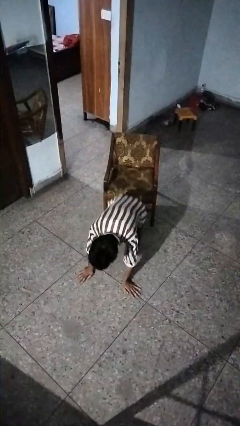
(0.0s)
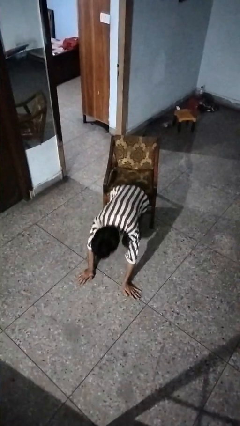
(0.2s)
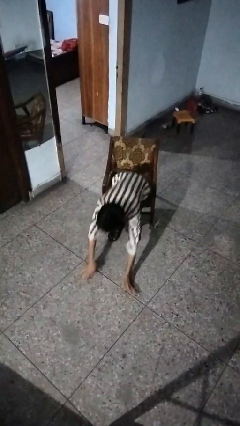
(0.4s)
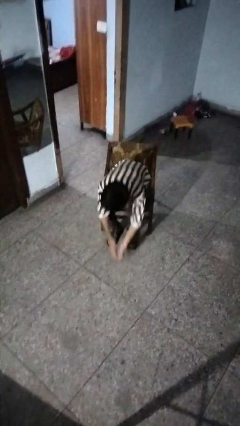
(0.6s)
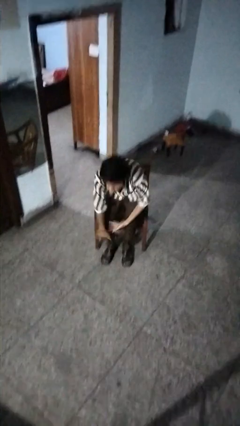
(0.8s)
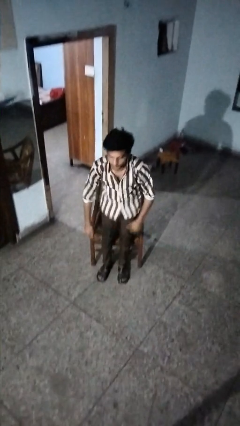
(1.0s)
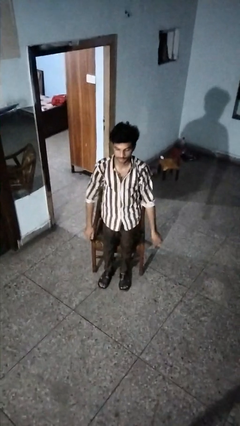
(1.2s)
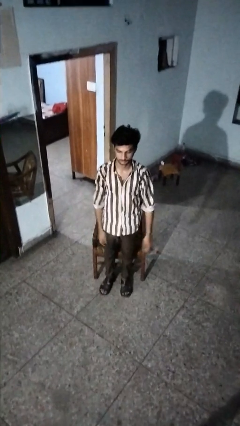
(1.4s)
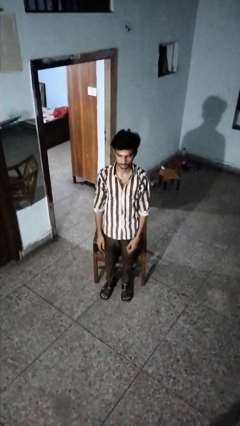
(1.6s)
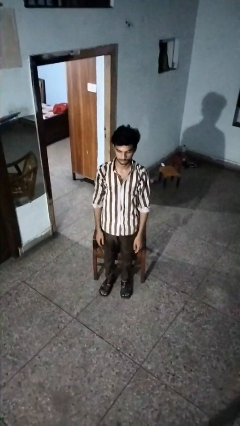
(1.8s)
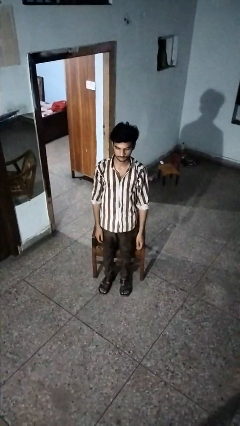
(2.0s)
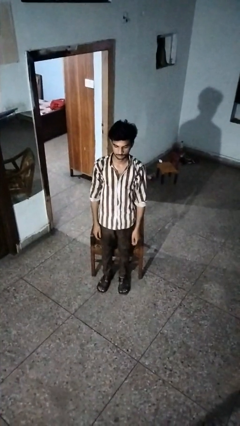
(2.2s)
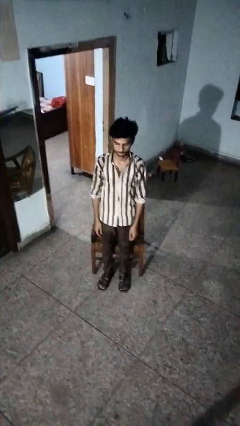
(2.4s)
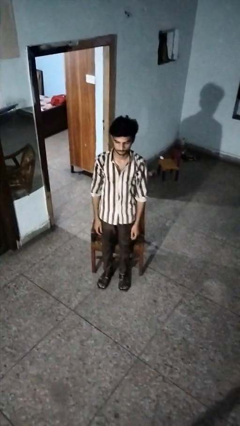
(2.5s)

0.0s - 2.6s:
person stands up from floor

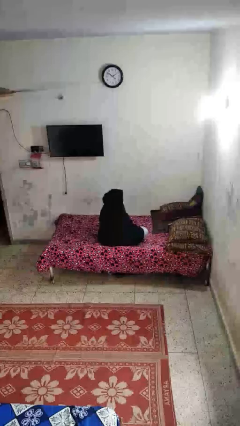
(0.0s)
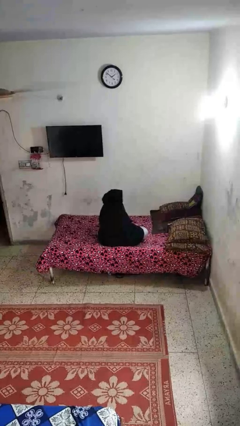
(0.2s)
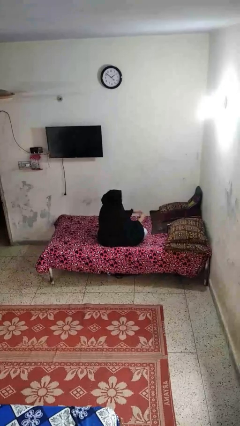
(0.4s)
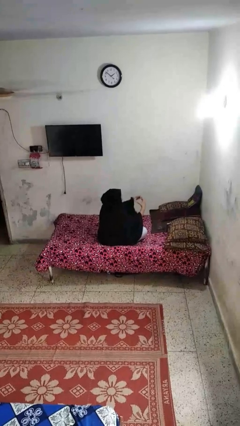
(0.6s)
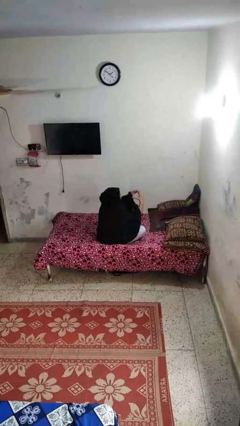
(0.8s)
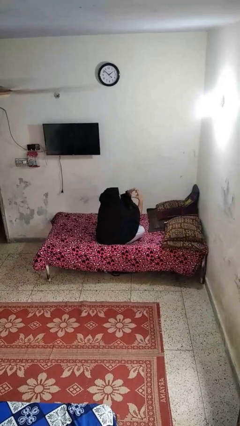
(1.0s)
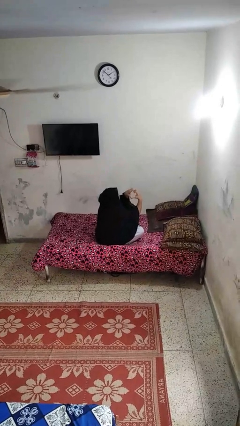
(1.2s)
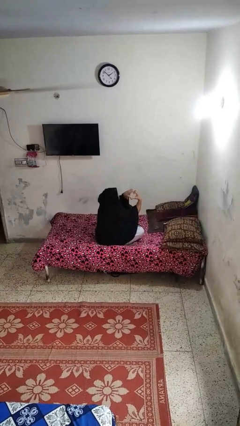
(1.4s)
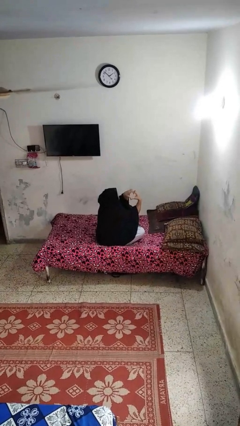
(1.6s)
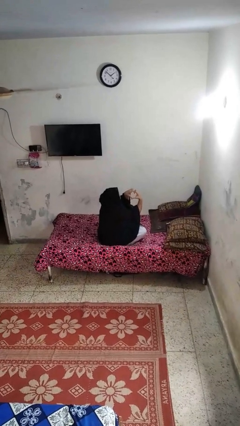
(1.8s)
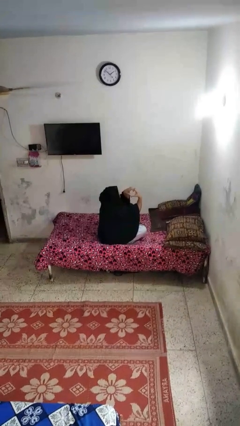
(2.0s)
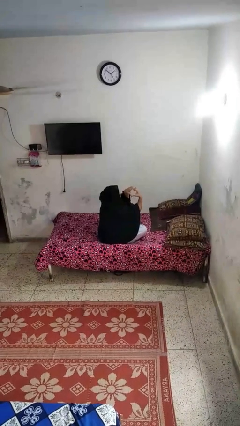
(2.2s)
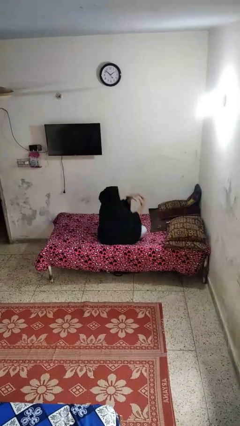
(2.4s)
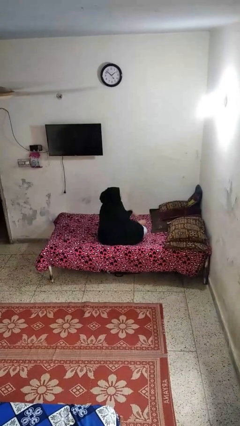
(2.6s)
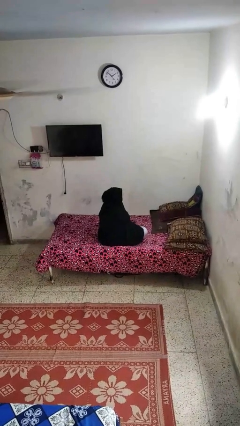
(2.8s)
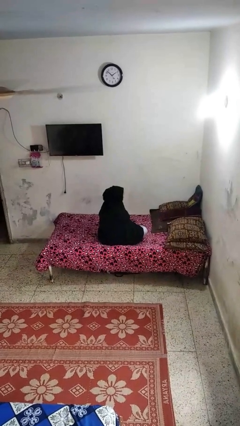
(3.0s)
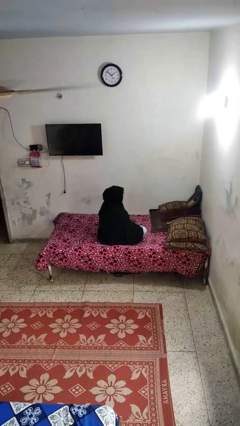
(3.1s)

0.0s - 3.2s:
person gestures heart

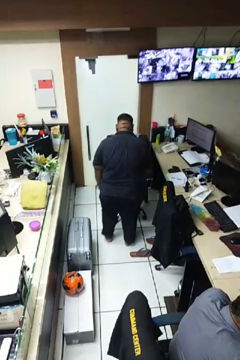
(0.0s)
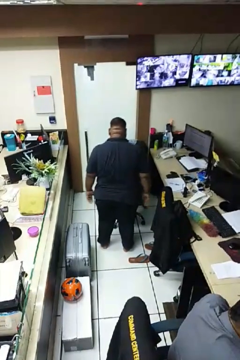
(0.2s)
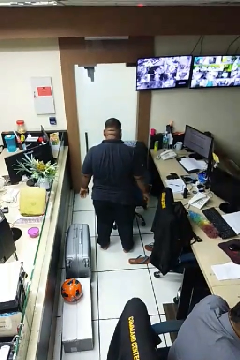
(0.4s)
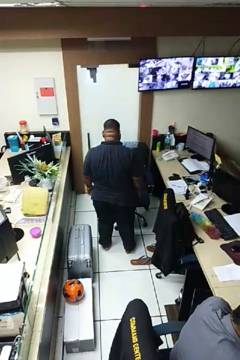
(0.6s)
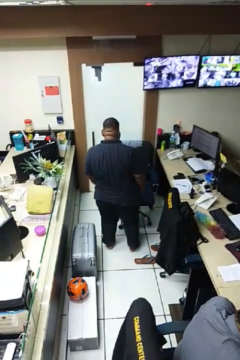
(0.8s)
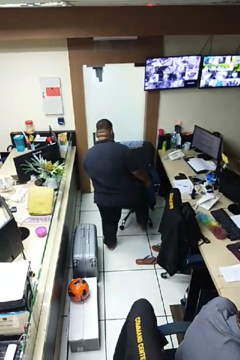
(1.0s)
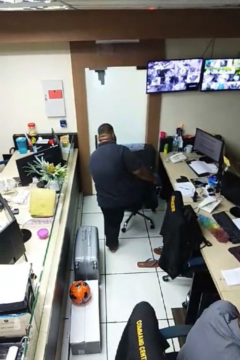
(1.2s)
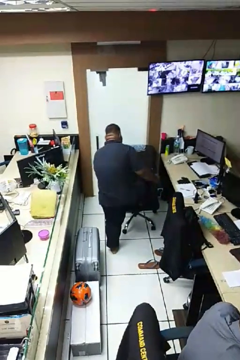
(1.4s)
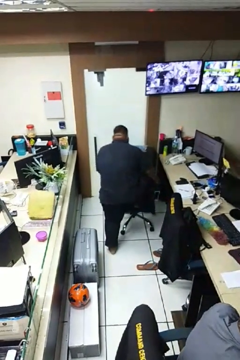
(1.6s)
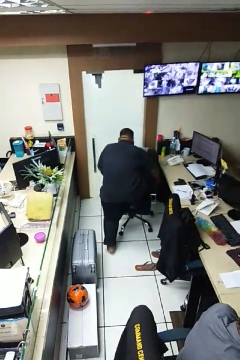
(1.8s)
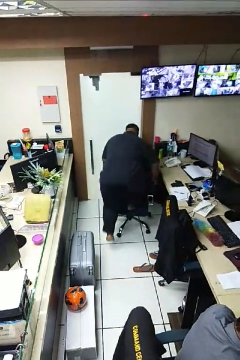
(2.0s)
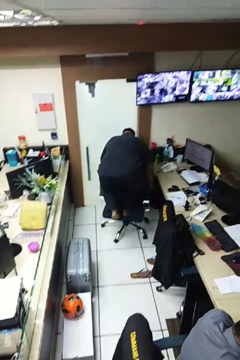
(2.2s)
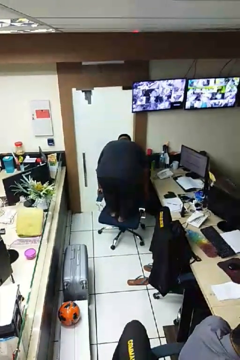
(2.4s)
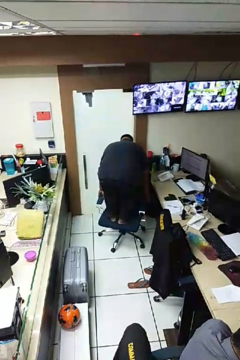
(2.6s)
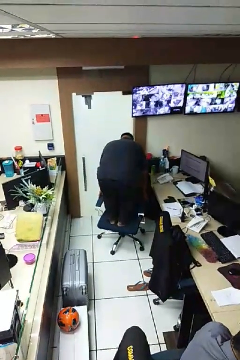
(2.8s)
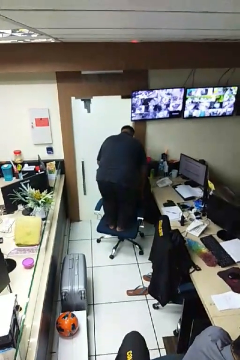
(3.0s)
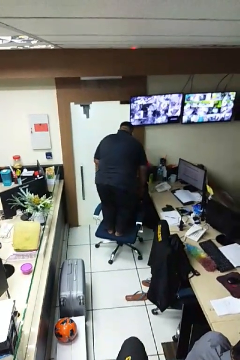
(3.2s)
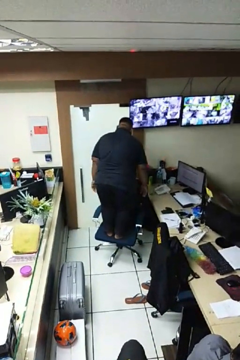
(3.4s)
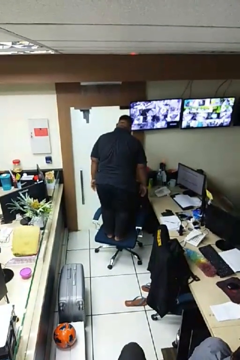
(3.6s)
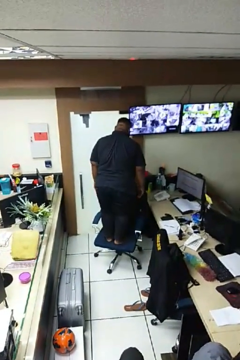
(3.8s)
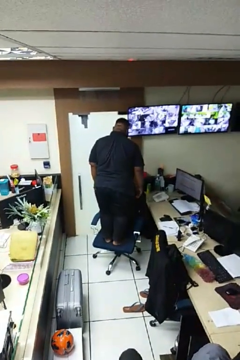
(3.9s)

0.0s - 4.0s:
person climbs on chair

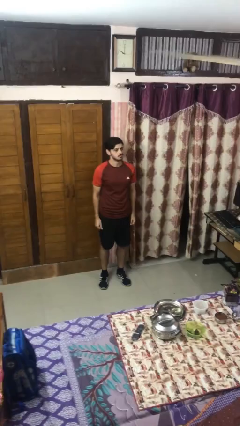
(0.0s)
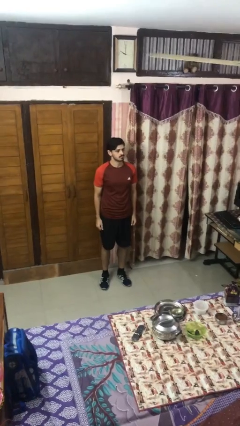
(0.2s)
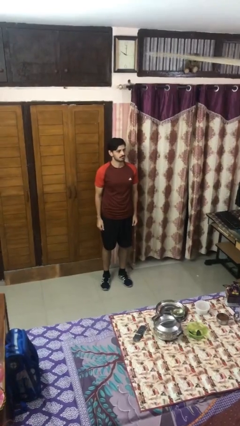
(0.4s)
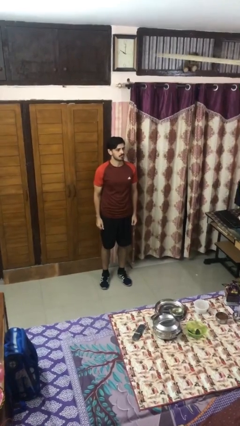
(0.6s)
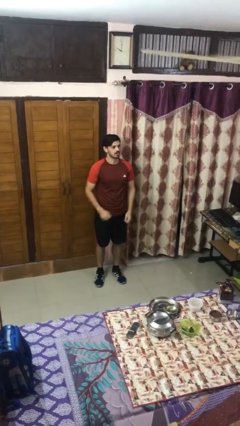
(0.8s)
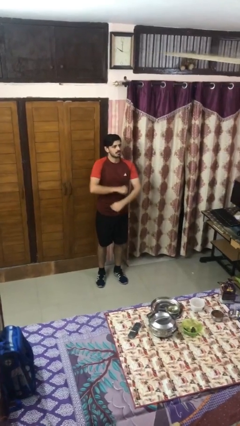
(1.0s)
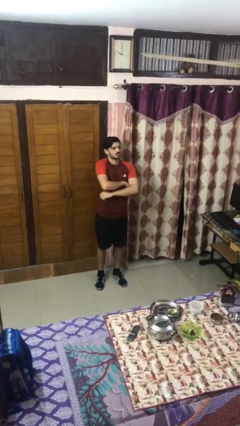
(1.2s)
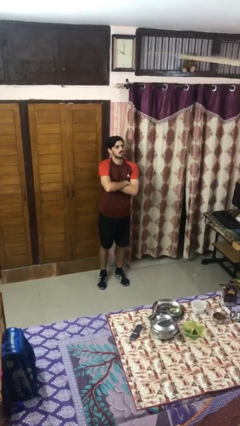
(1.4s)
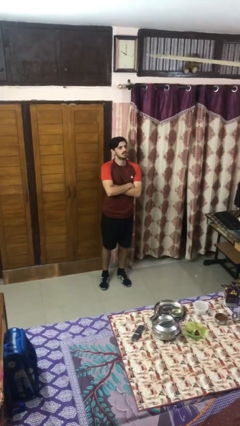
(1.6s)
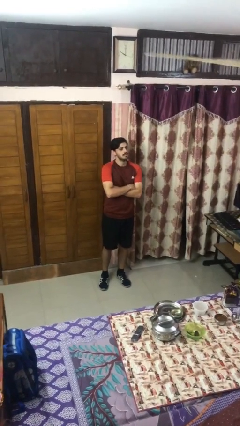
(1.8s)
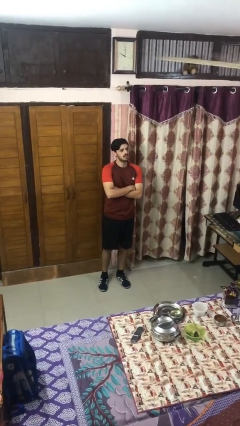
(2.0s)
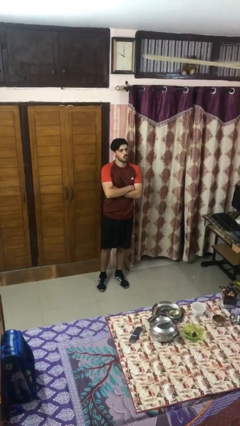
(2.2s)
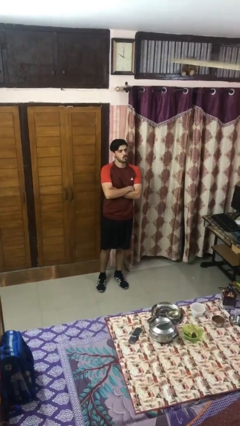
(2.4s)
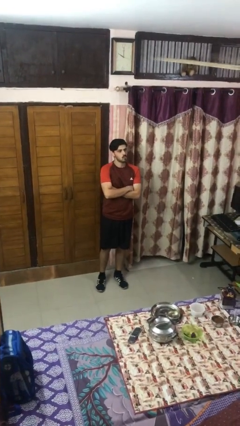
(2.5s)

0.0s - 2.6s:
person crosses arms

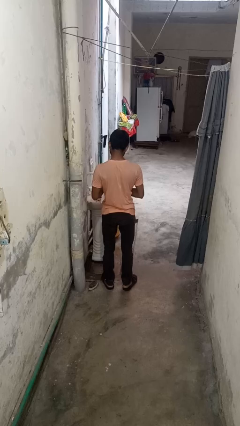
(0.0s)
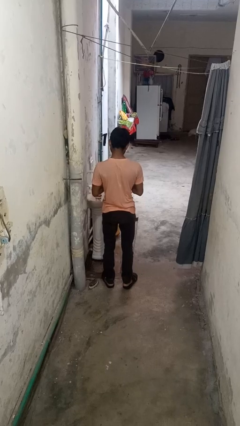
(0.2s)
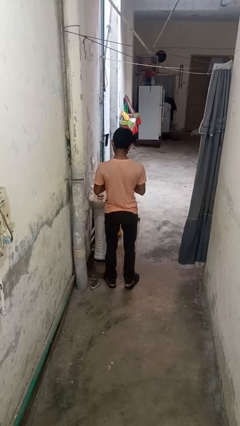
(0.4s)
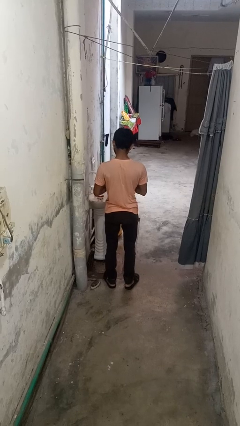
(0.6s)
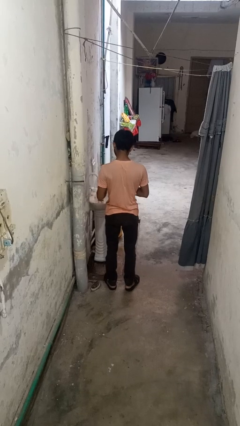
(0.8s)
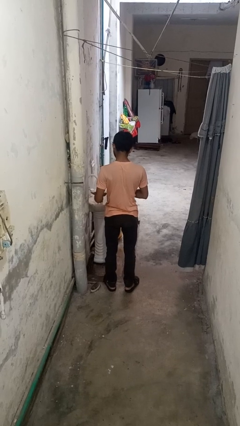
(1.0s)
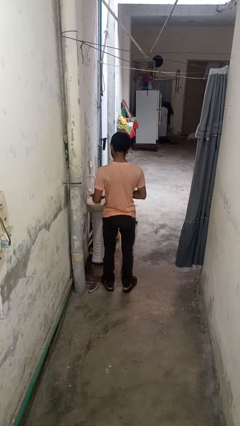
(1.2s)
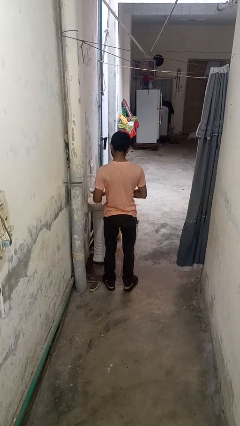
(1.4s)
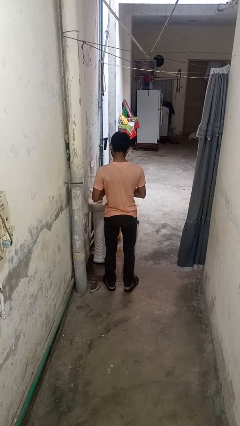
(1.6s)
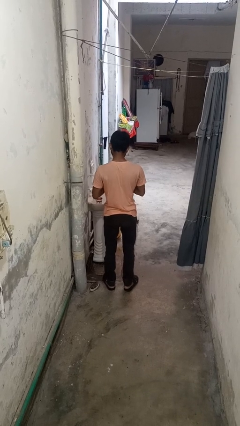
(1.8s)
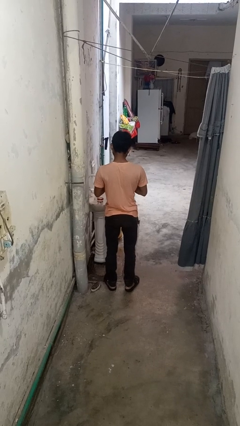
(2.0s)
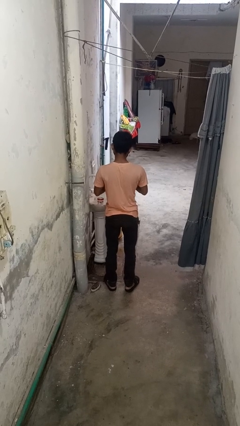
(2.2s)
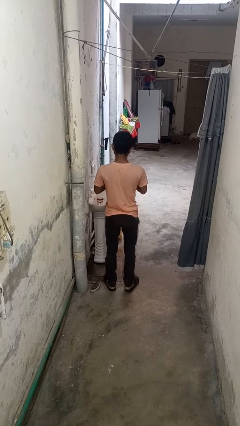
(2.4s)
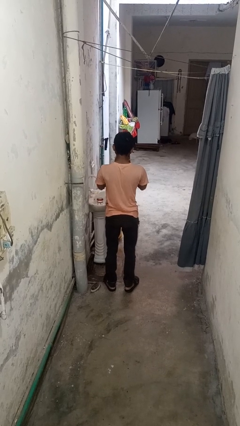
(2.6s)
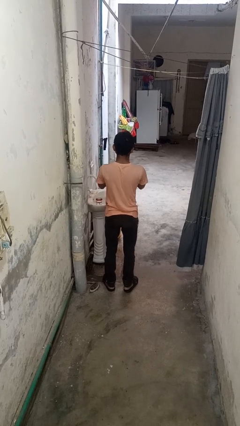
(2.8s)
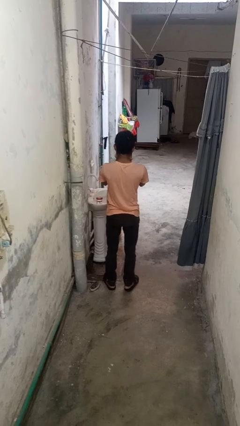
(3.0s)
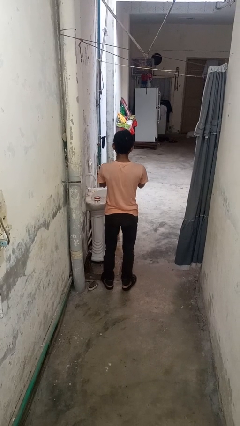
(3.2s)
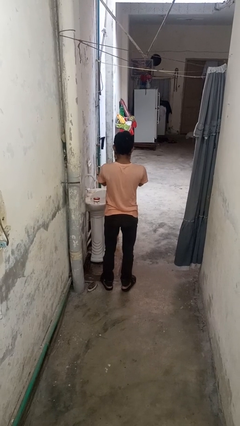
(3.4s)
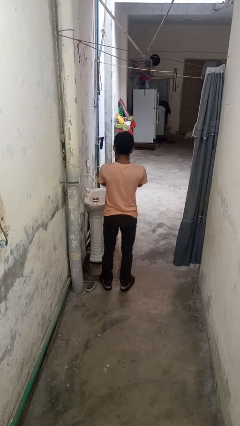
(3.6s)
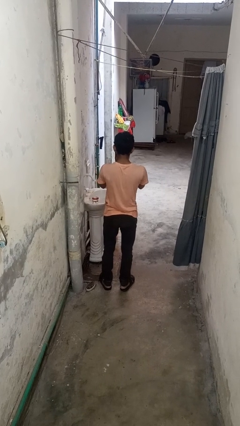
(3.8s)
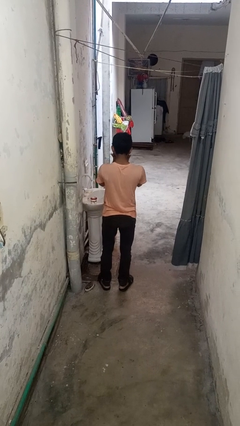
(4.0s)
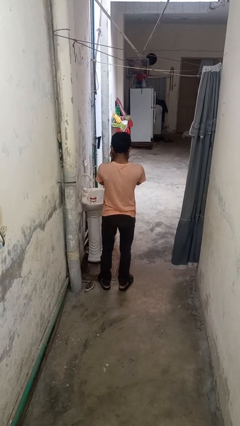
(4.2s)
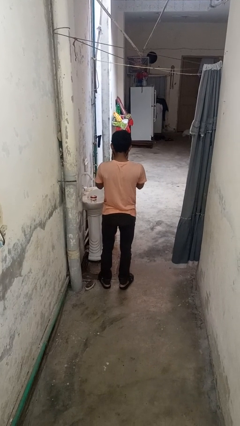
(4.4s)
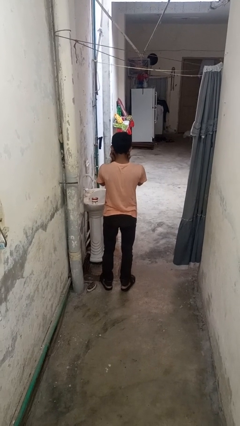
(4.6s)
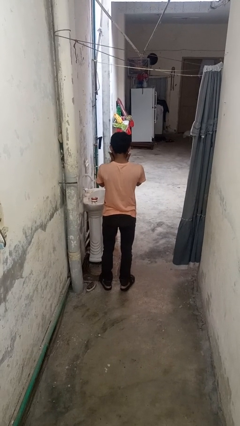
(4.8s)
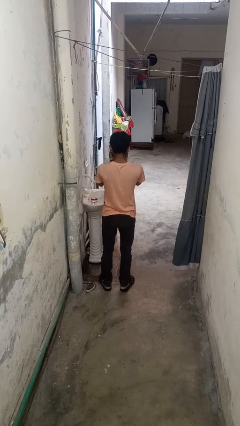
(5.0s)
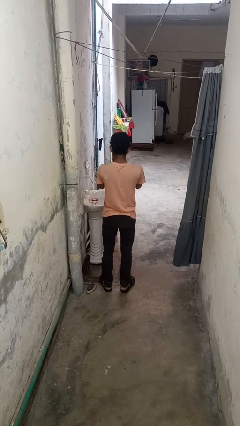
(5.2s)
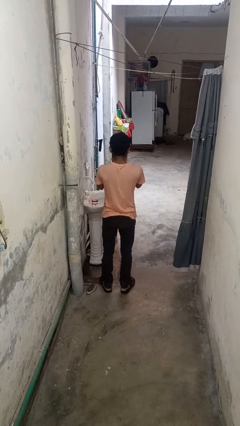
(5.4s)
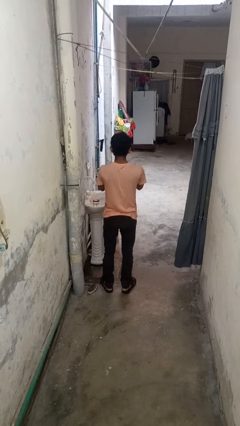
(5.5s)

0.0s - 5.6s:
person applies facial moisturizer

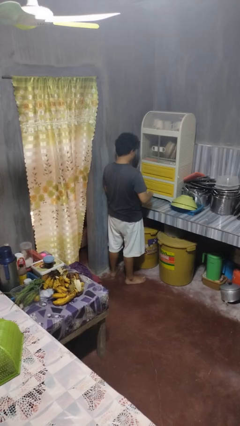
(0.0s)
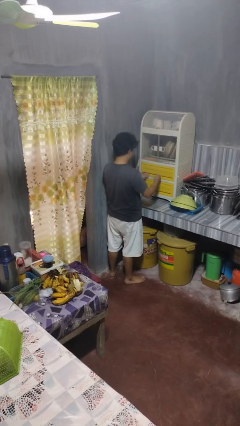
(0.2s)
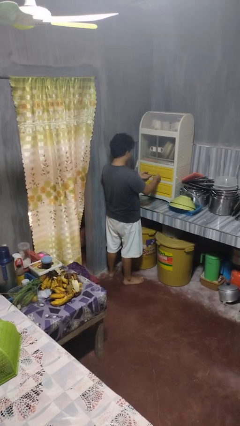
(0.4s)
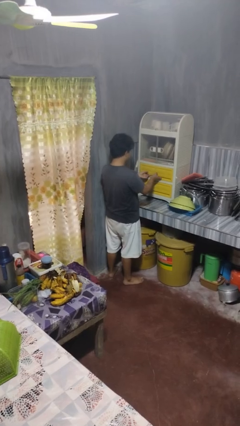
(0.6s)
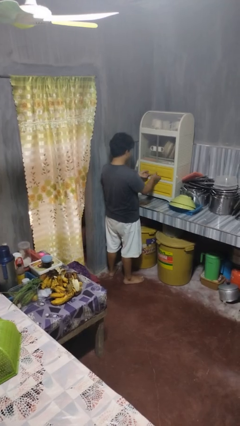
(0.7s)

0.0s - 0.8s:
person opens kitchen drawer
